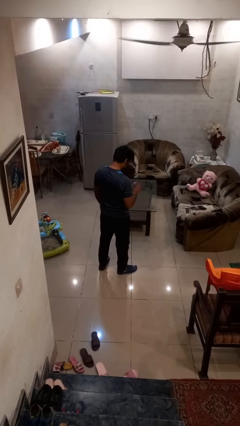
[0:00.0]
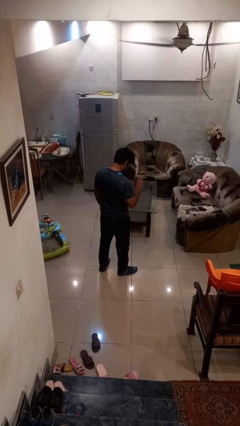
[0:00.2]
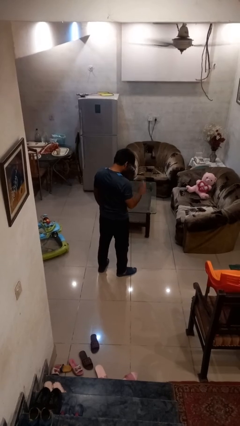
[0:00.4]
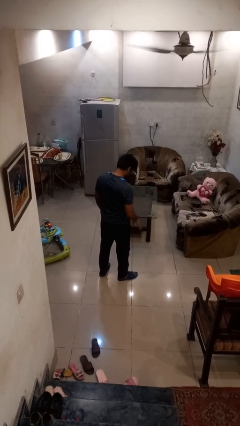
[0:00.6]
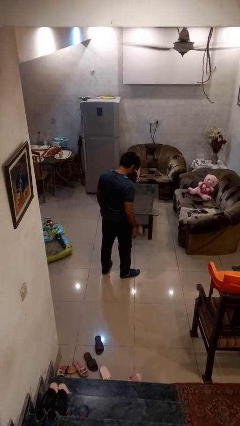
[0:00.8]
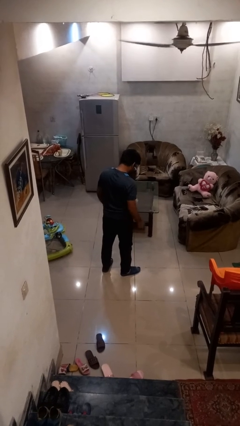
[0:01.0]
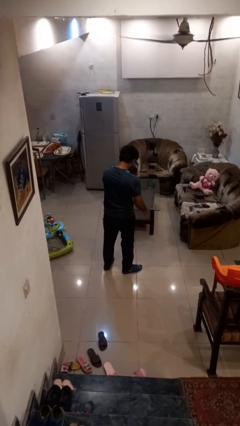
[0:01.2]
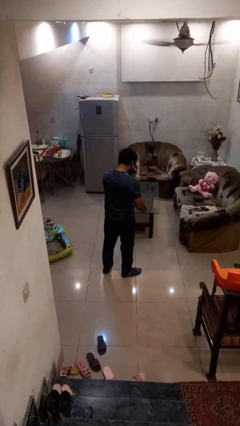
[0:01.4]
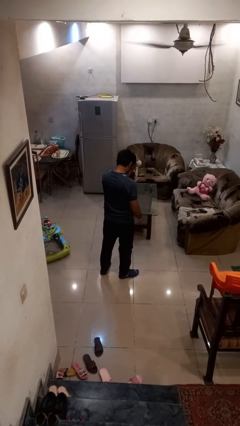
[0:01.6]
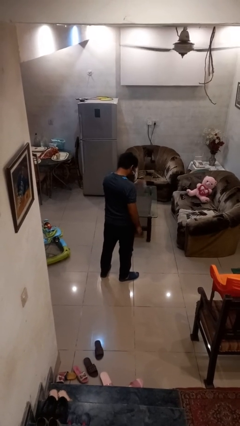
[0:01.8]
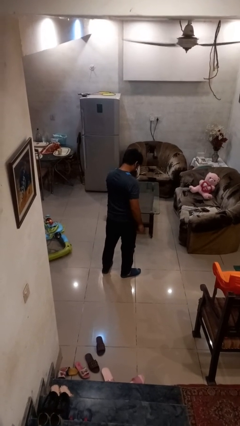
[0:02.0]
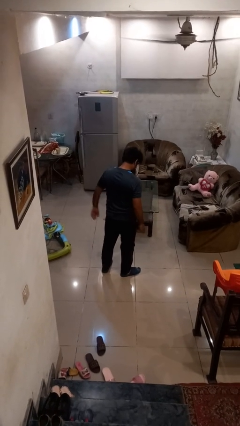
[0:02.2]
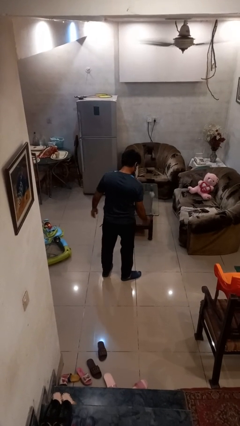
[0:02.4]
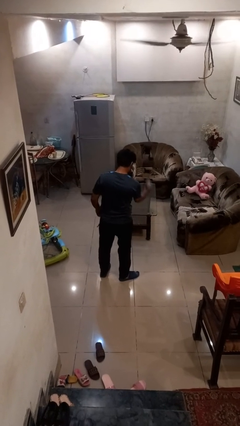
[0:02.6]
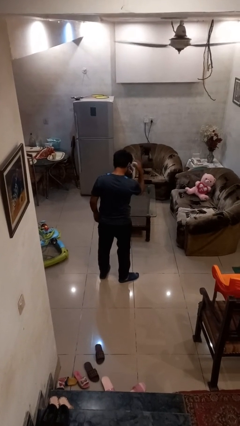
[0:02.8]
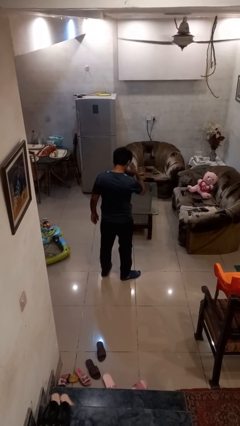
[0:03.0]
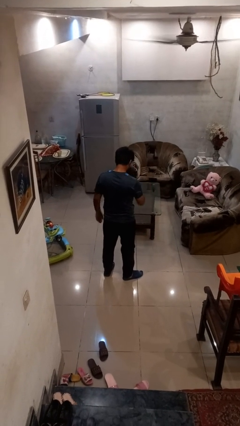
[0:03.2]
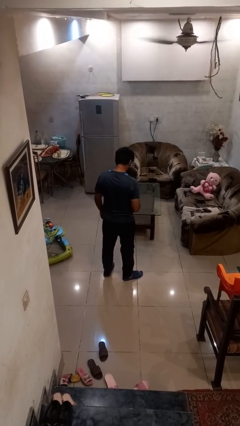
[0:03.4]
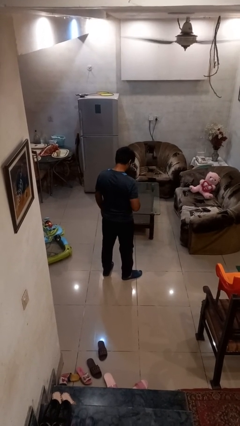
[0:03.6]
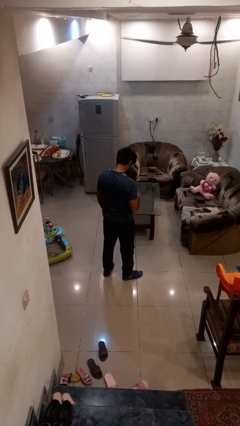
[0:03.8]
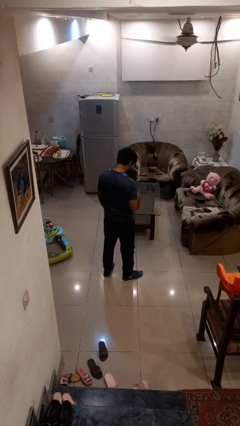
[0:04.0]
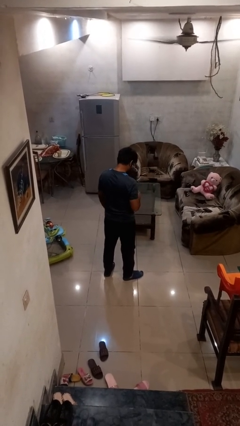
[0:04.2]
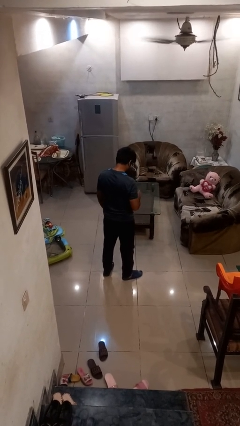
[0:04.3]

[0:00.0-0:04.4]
person bounces ball on floor

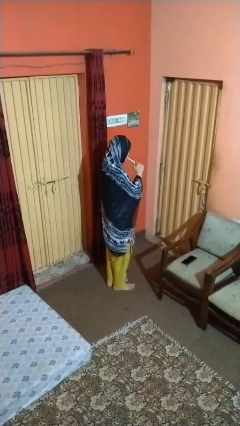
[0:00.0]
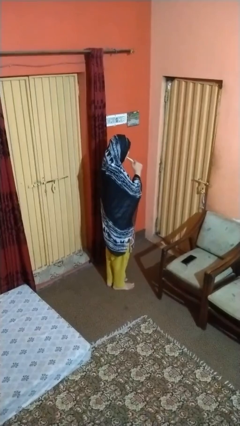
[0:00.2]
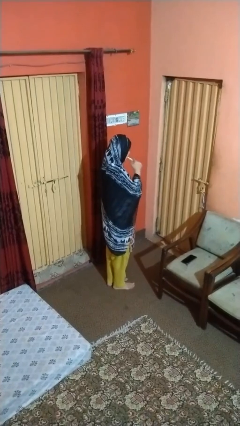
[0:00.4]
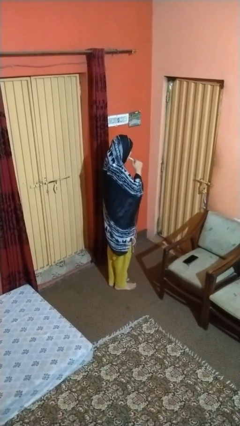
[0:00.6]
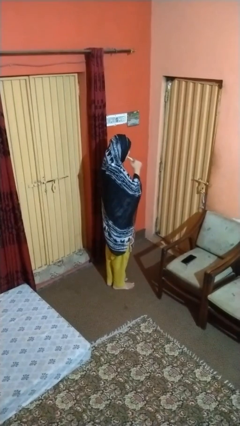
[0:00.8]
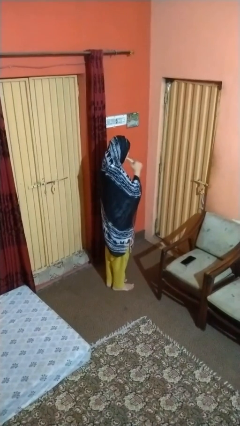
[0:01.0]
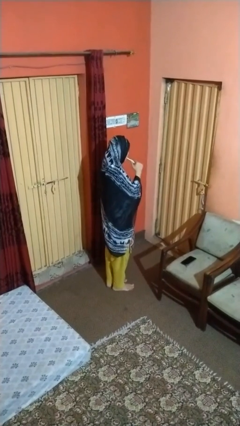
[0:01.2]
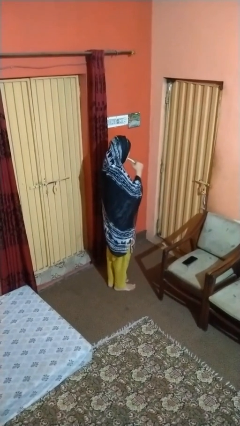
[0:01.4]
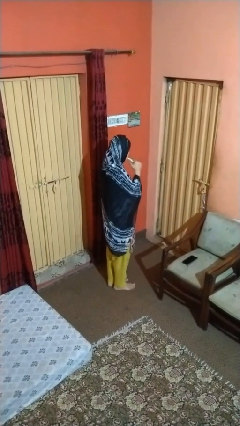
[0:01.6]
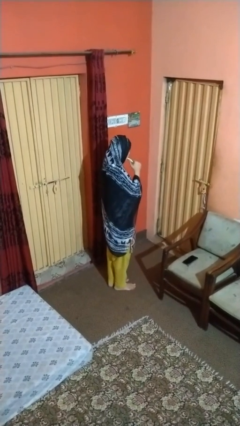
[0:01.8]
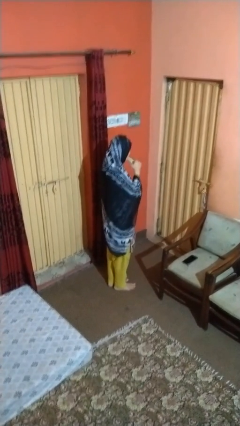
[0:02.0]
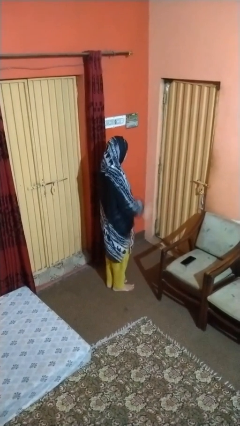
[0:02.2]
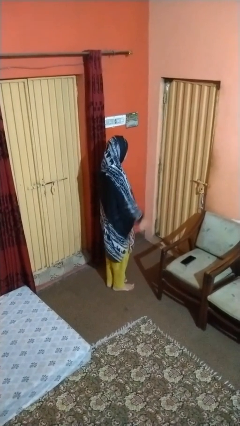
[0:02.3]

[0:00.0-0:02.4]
person brushes teeth

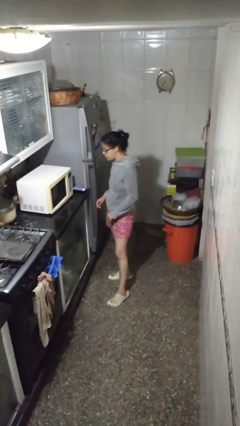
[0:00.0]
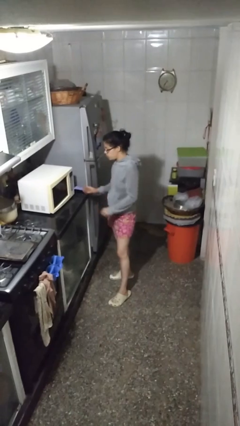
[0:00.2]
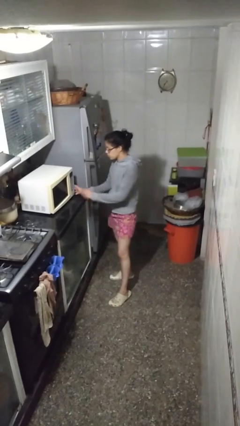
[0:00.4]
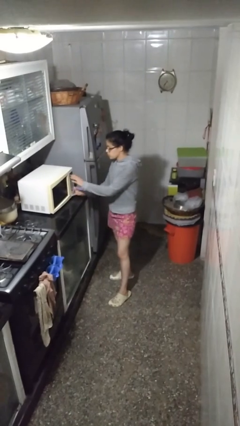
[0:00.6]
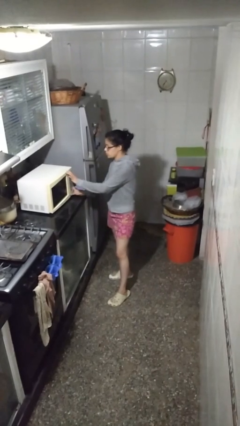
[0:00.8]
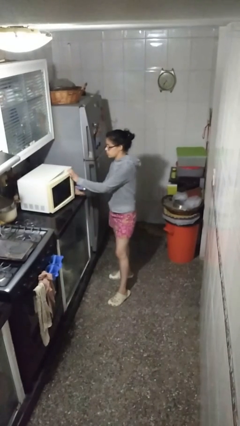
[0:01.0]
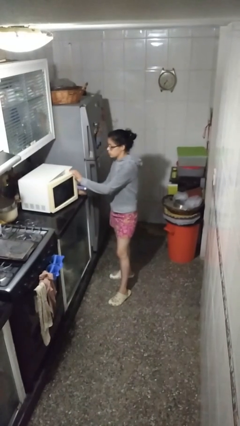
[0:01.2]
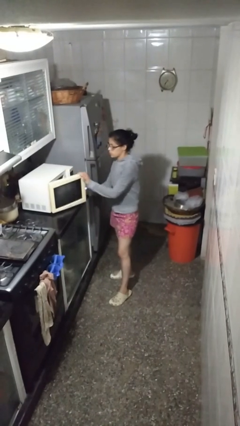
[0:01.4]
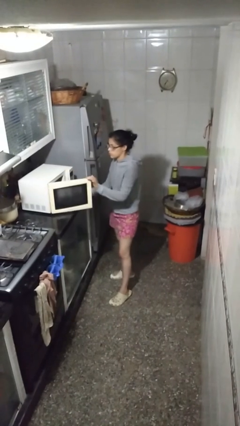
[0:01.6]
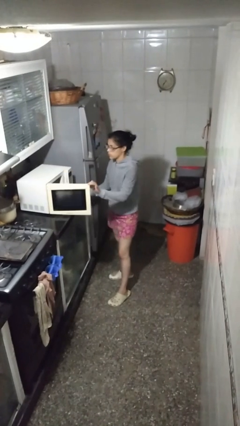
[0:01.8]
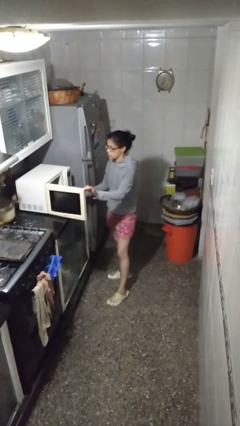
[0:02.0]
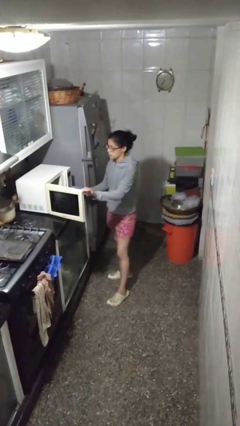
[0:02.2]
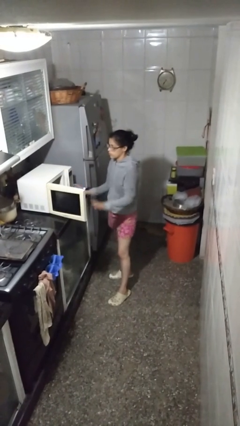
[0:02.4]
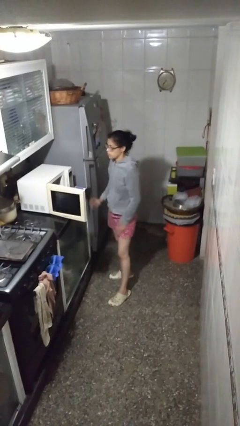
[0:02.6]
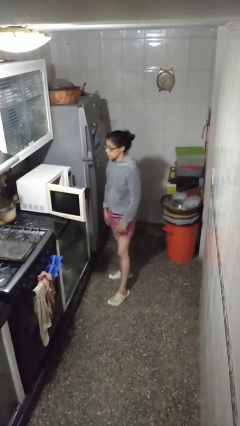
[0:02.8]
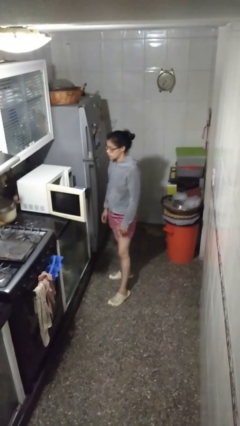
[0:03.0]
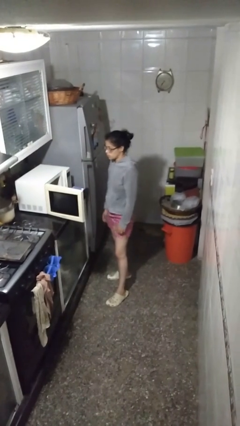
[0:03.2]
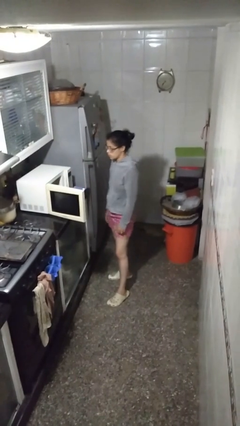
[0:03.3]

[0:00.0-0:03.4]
person opens microwave

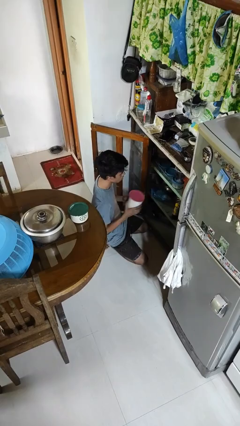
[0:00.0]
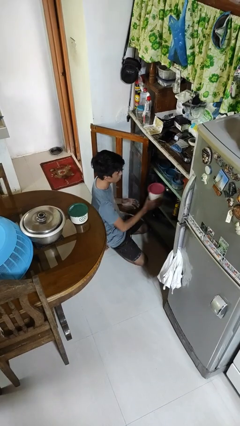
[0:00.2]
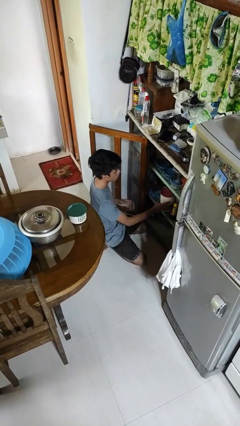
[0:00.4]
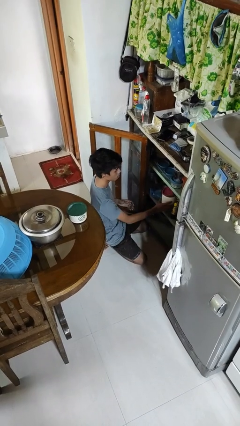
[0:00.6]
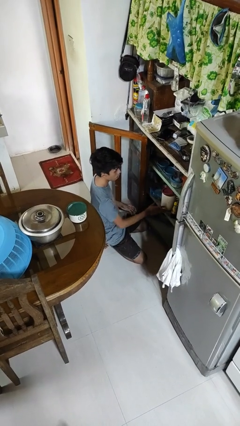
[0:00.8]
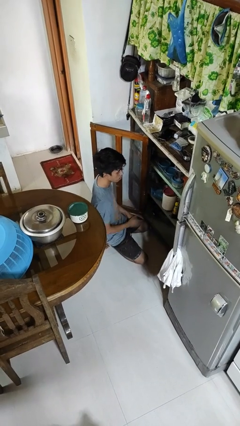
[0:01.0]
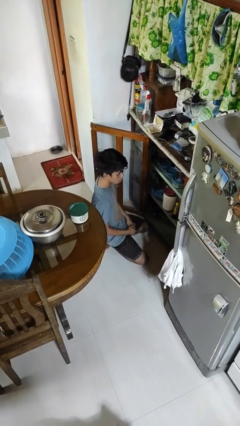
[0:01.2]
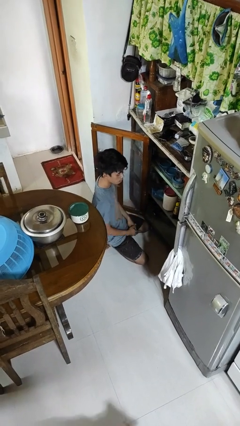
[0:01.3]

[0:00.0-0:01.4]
person puts down object into cabinet

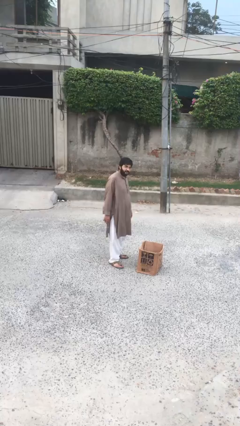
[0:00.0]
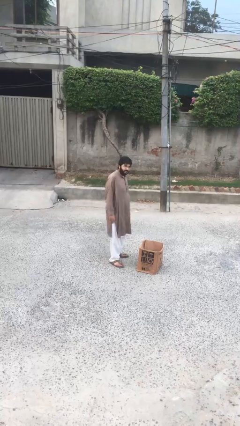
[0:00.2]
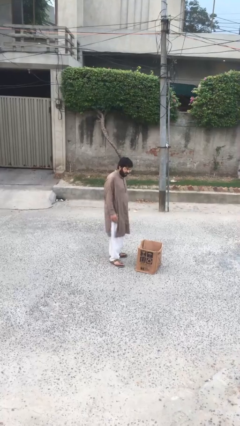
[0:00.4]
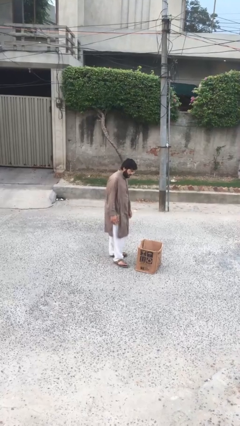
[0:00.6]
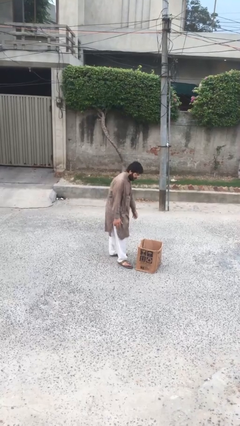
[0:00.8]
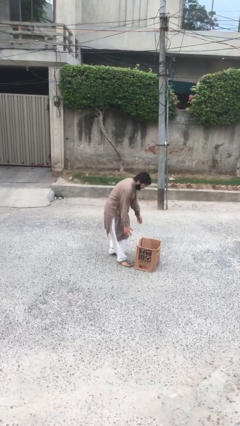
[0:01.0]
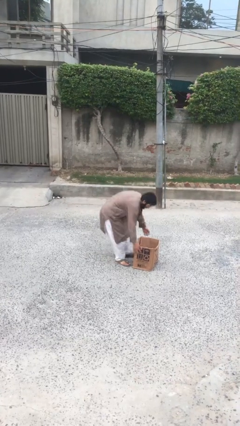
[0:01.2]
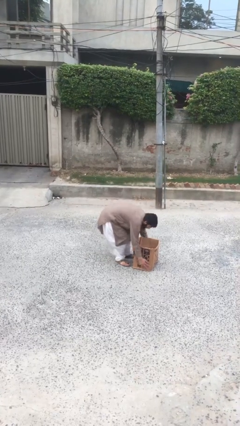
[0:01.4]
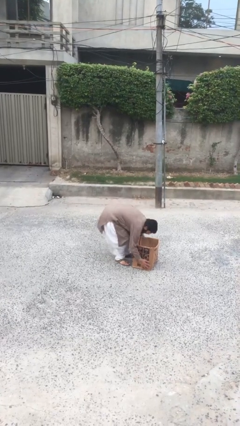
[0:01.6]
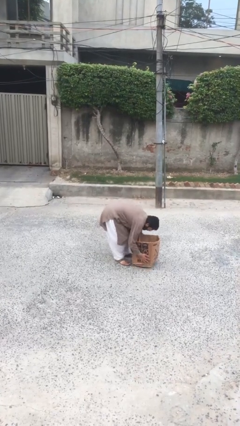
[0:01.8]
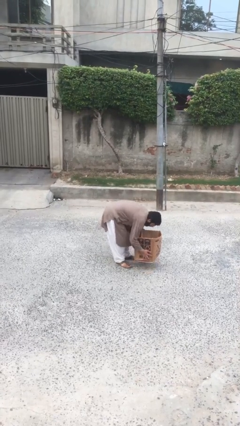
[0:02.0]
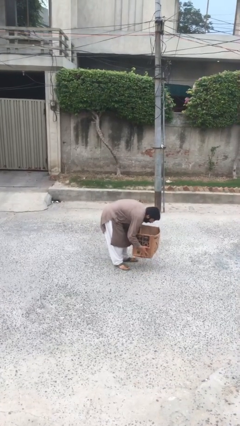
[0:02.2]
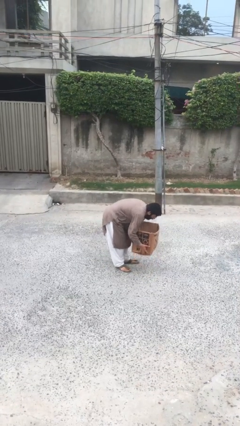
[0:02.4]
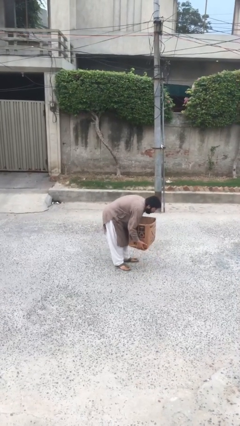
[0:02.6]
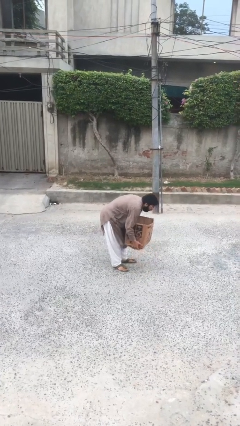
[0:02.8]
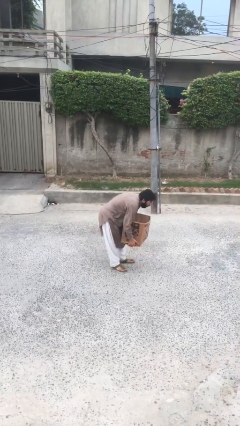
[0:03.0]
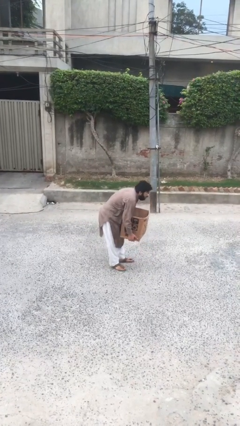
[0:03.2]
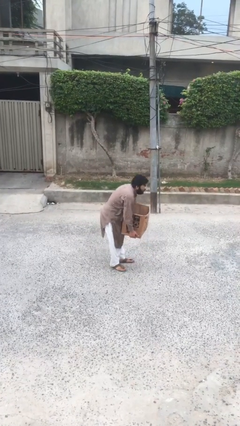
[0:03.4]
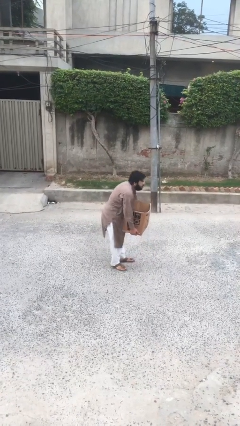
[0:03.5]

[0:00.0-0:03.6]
person picks up object from floor

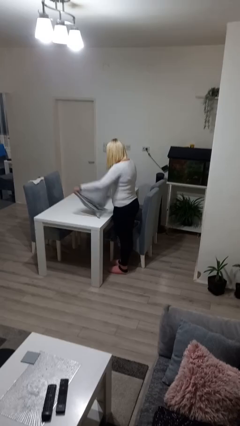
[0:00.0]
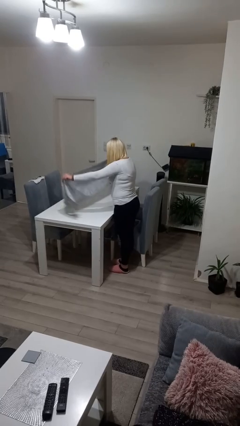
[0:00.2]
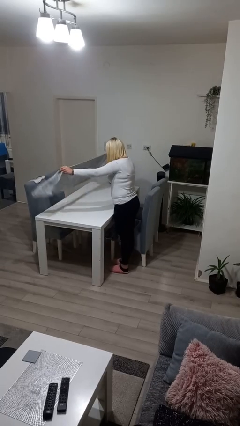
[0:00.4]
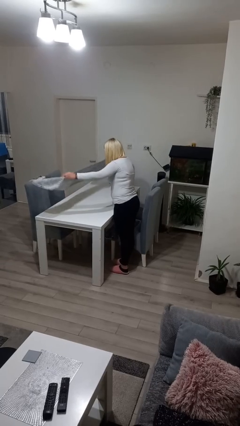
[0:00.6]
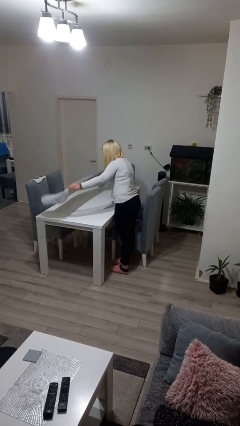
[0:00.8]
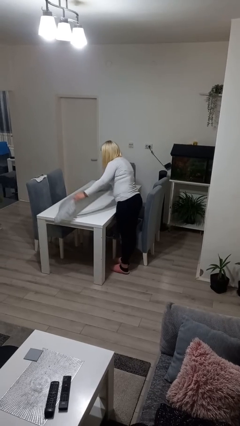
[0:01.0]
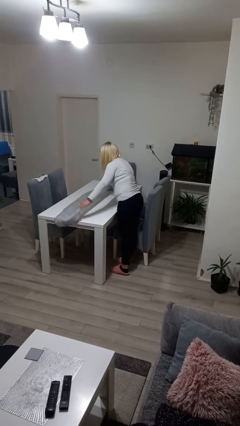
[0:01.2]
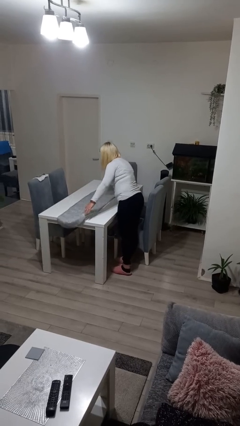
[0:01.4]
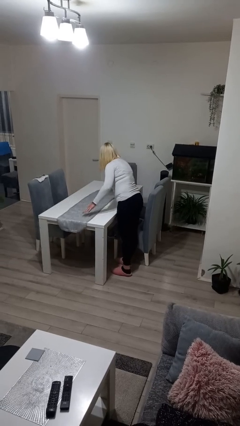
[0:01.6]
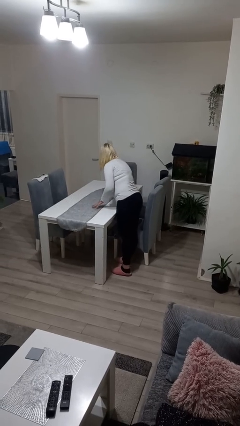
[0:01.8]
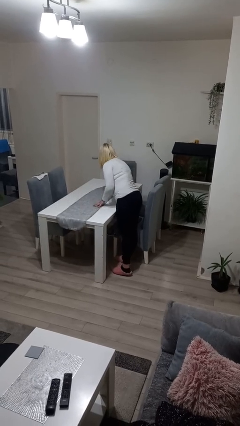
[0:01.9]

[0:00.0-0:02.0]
person spreads tablecloth
